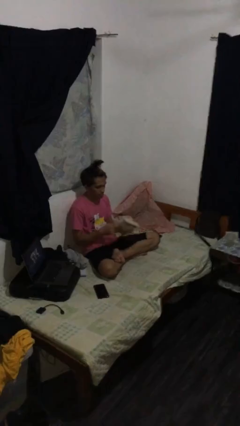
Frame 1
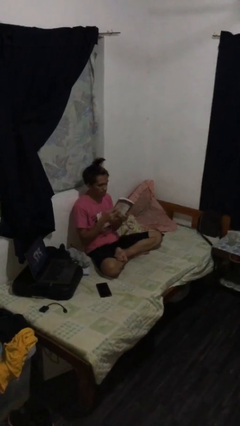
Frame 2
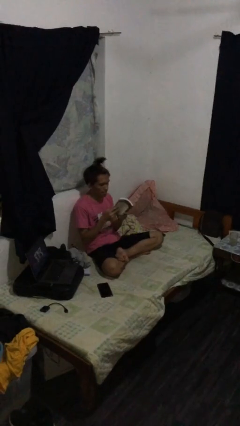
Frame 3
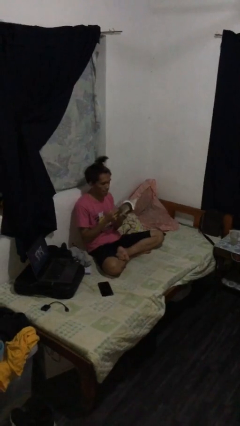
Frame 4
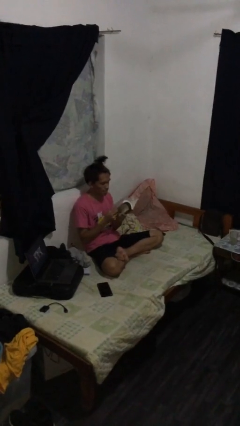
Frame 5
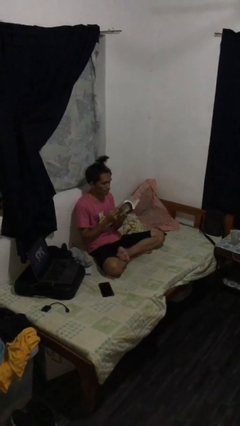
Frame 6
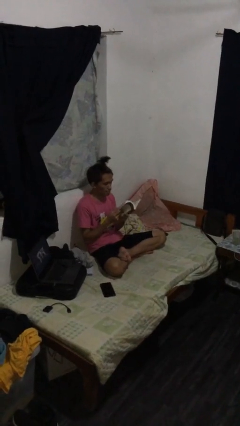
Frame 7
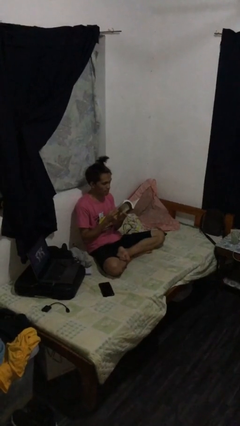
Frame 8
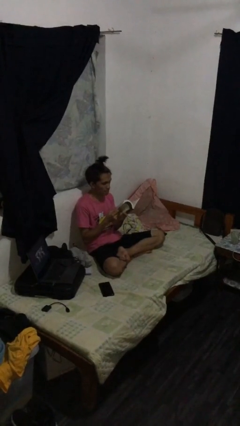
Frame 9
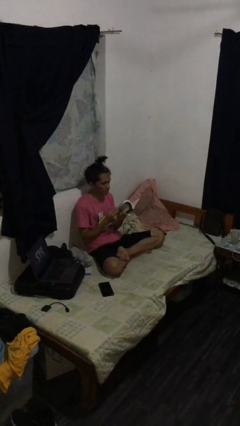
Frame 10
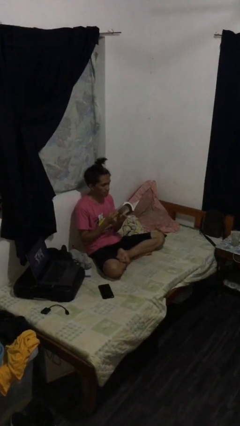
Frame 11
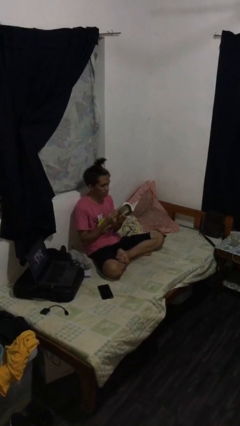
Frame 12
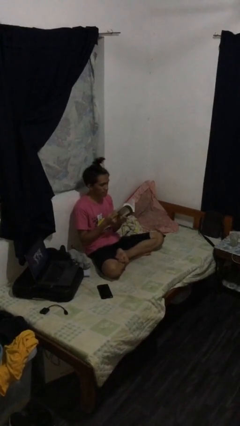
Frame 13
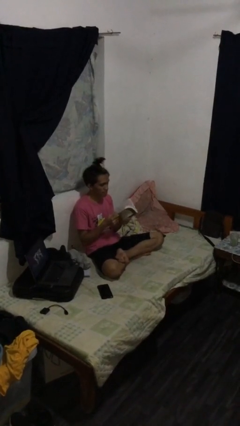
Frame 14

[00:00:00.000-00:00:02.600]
person reads document

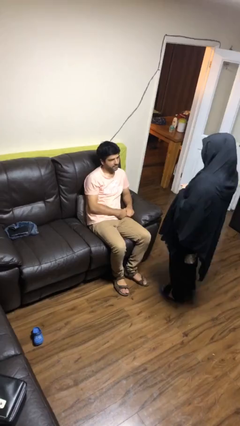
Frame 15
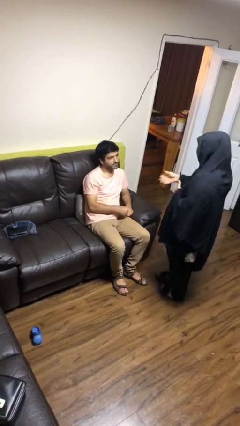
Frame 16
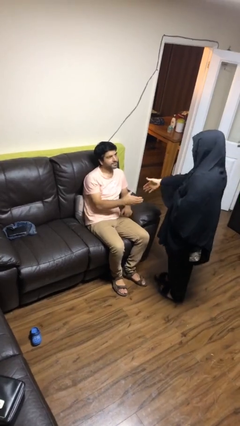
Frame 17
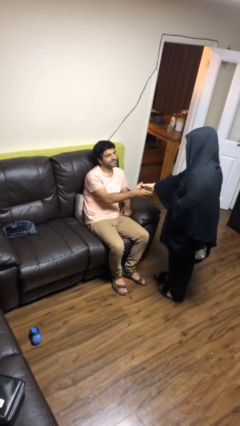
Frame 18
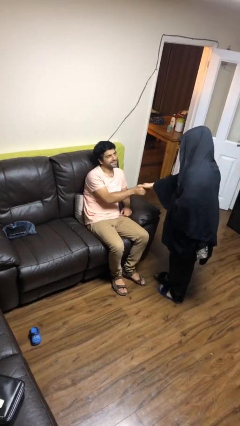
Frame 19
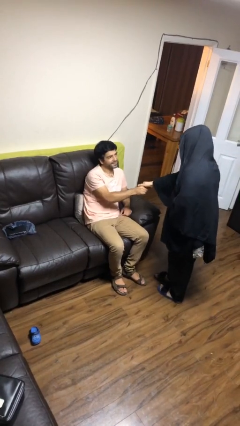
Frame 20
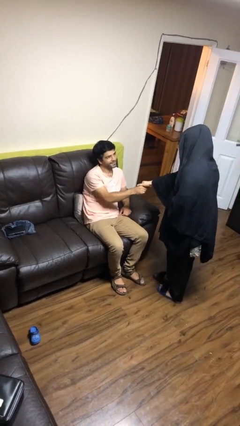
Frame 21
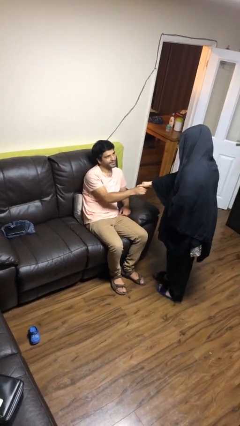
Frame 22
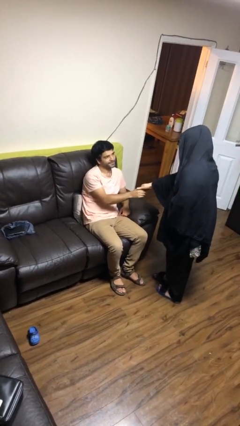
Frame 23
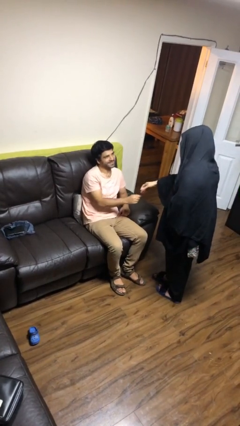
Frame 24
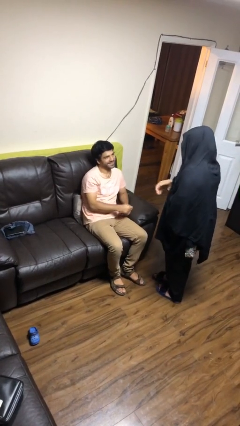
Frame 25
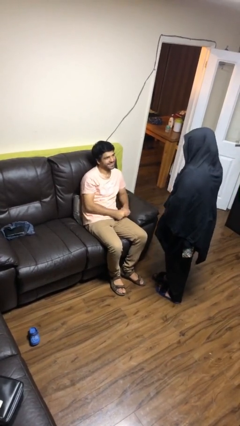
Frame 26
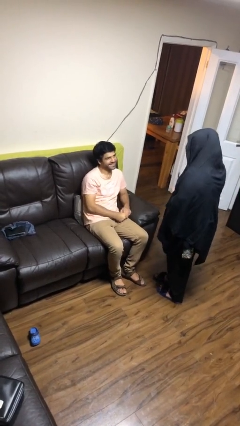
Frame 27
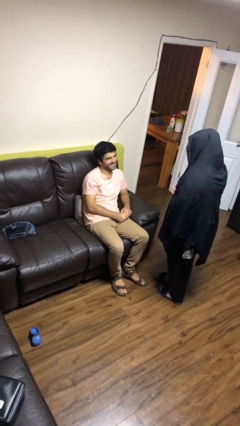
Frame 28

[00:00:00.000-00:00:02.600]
person shakes hand

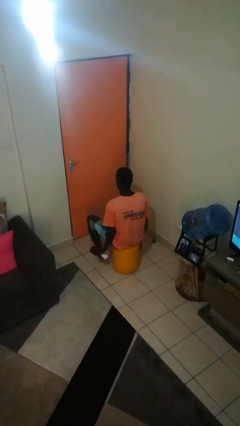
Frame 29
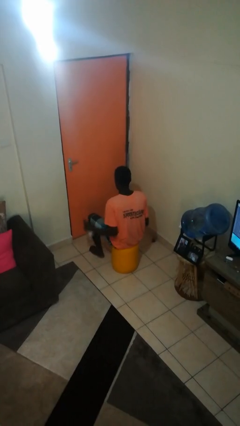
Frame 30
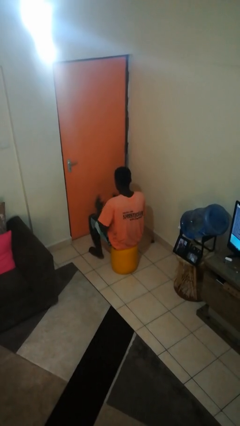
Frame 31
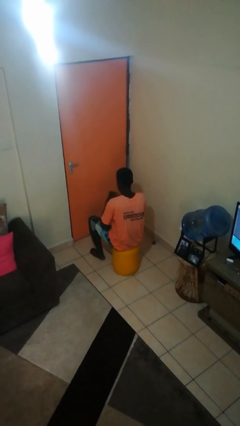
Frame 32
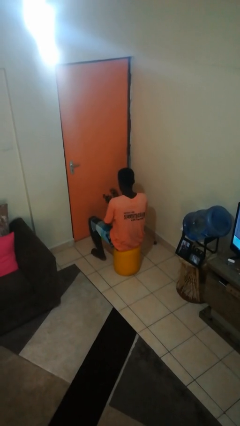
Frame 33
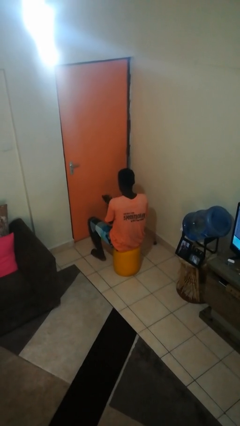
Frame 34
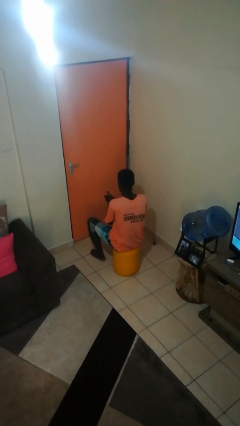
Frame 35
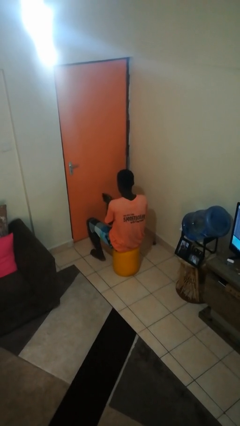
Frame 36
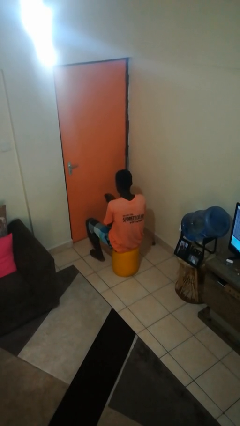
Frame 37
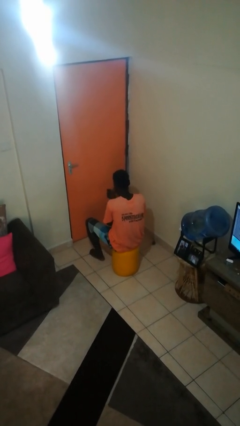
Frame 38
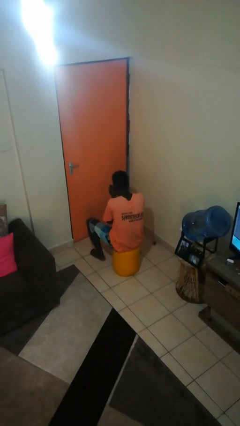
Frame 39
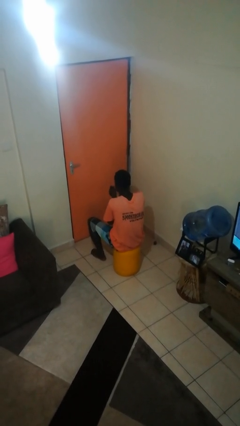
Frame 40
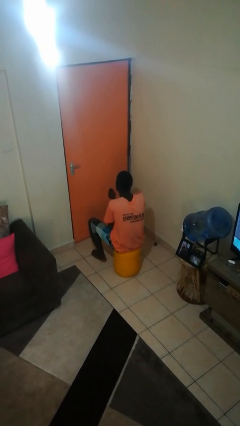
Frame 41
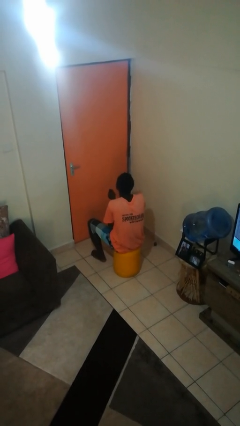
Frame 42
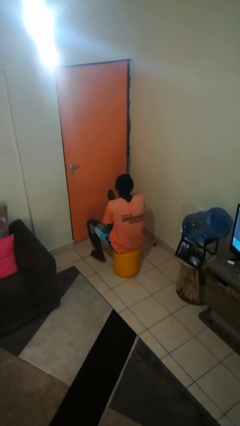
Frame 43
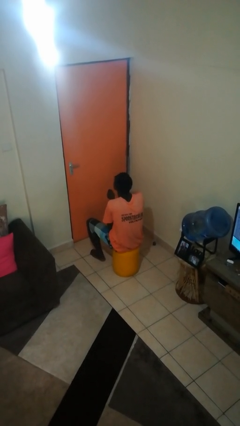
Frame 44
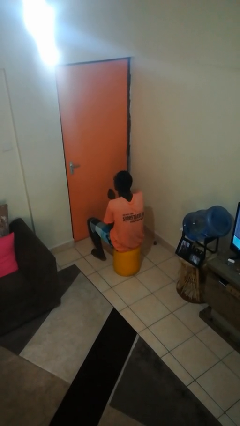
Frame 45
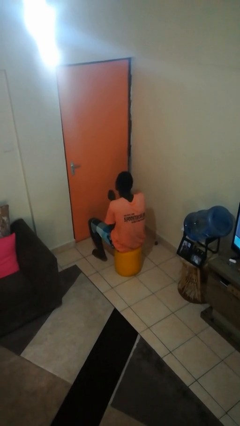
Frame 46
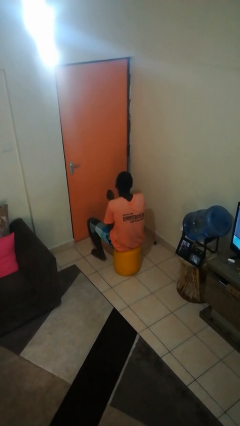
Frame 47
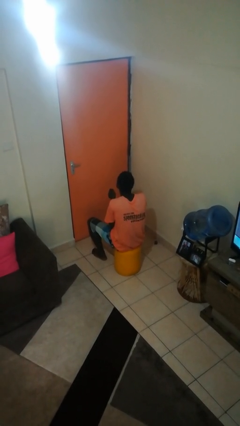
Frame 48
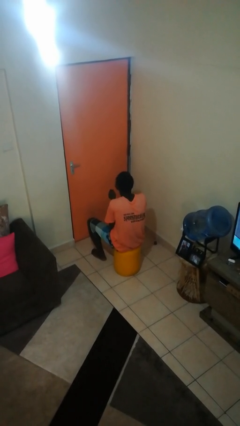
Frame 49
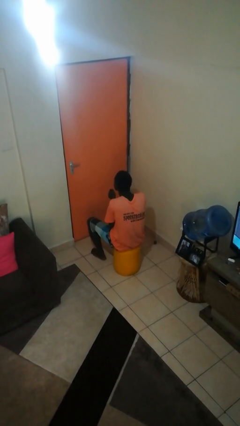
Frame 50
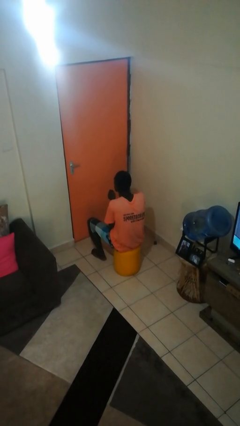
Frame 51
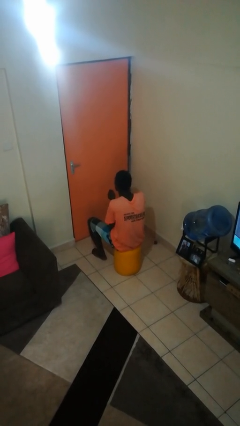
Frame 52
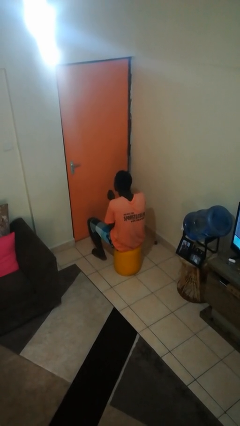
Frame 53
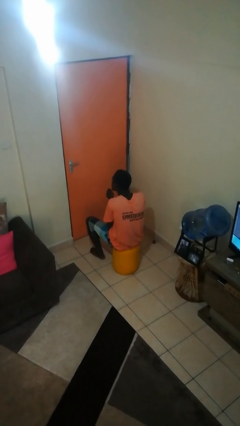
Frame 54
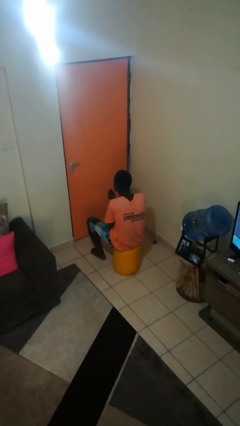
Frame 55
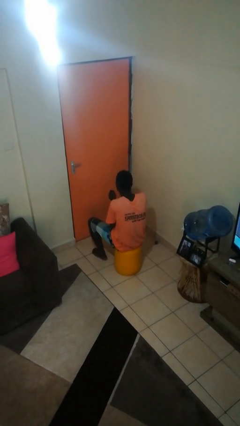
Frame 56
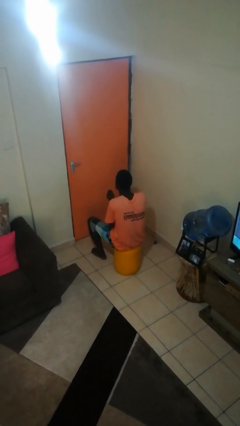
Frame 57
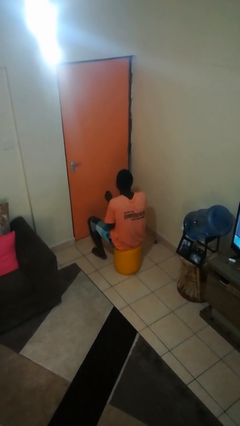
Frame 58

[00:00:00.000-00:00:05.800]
person applies sunscreen

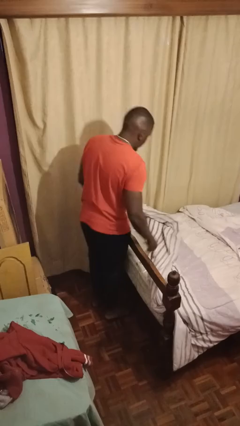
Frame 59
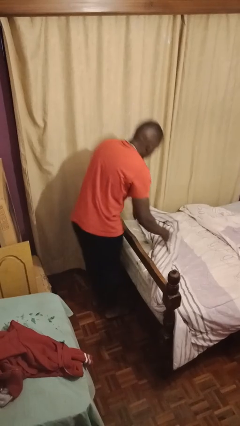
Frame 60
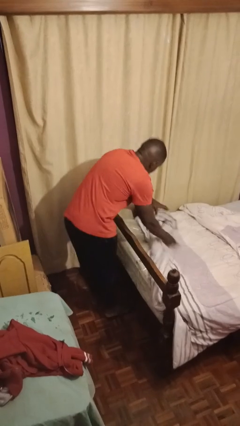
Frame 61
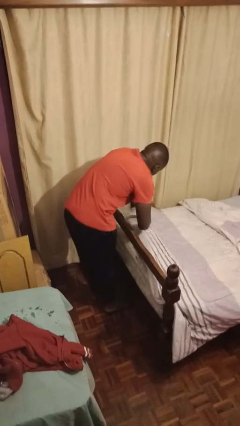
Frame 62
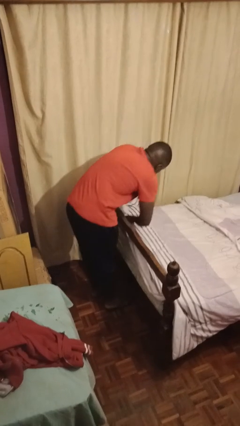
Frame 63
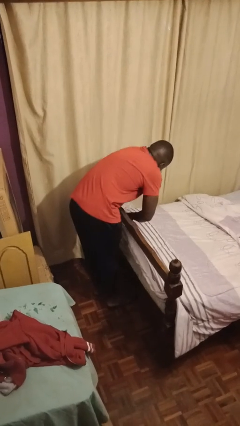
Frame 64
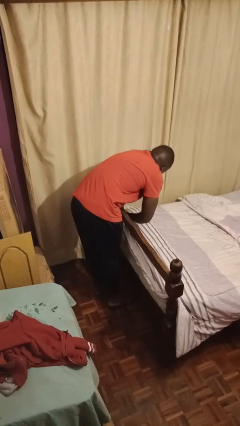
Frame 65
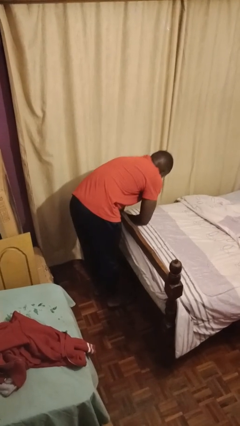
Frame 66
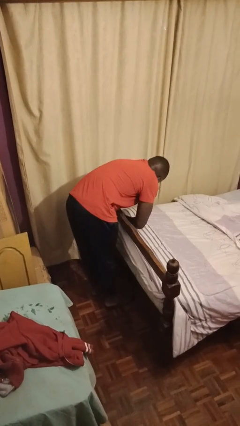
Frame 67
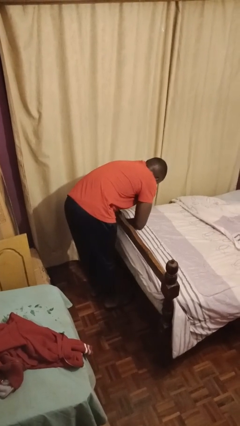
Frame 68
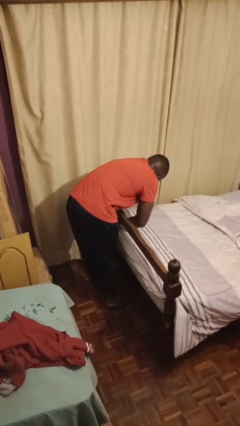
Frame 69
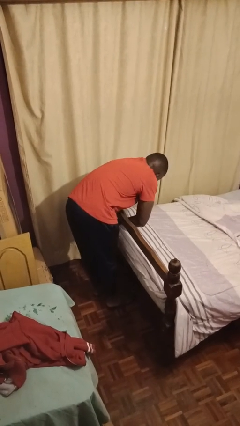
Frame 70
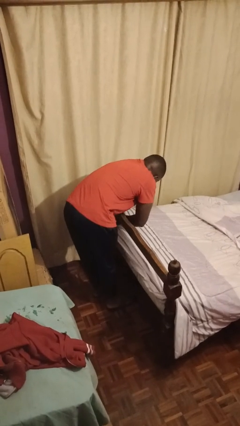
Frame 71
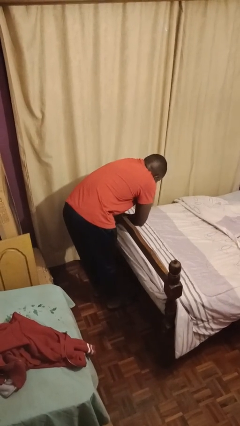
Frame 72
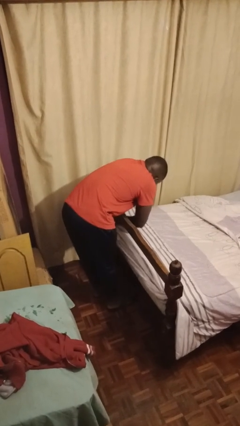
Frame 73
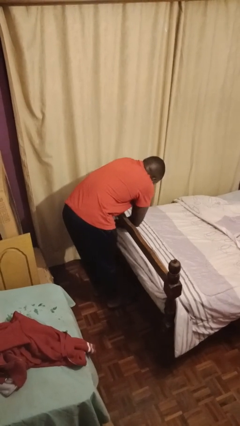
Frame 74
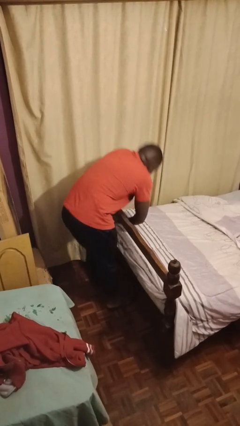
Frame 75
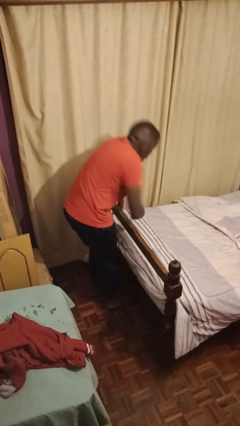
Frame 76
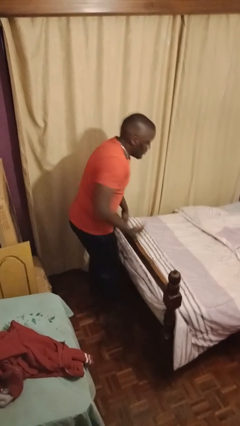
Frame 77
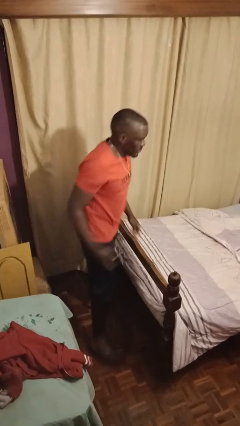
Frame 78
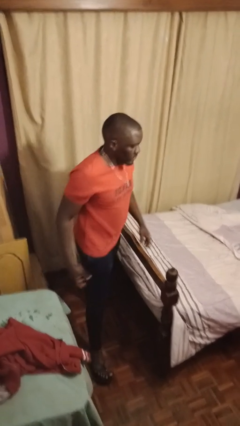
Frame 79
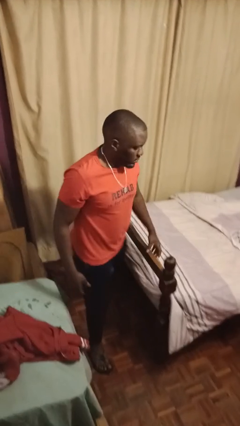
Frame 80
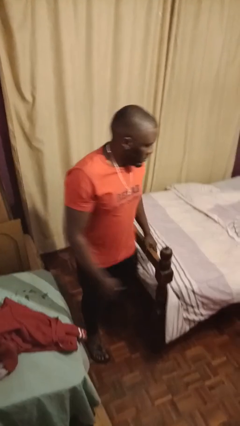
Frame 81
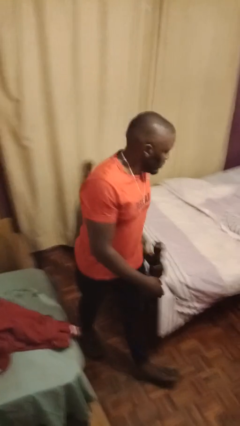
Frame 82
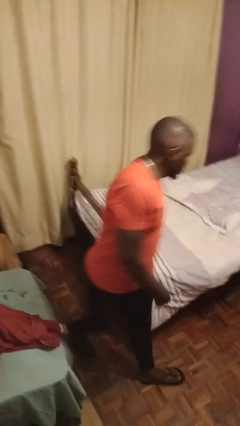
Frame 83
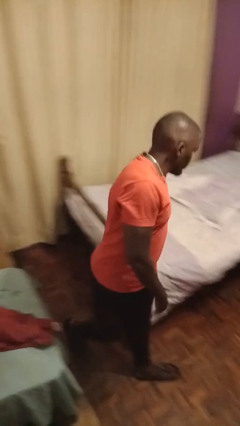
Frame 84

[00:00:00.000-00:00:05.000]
person makes bed

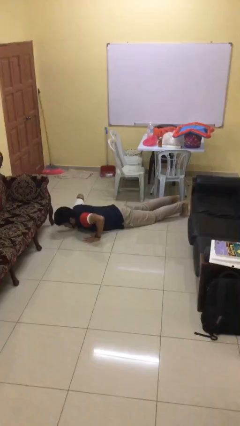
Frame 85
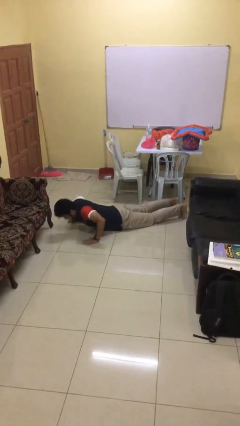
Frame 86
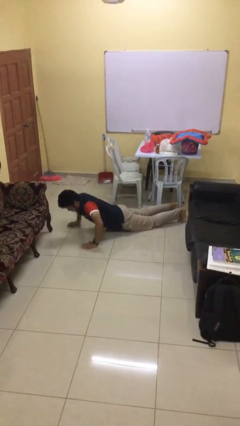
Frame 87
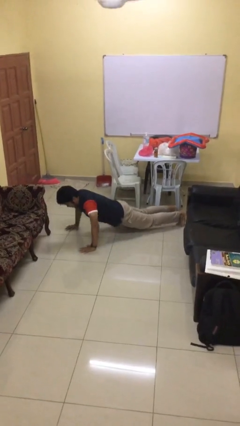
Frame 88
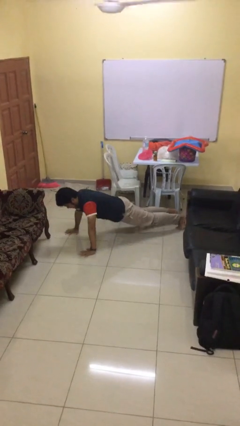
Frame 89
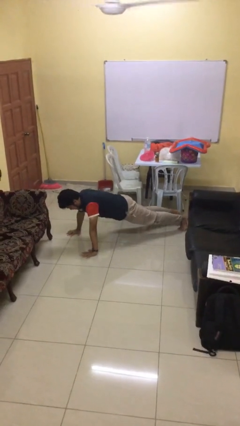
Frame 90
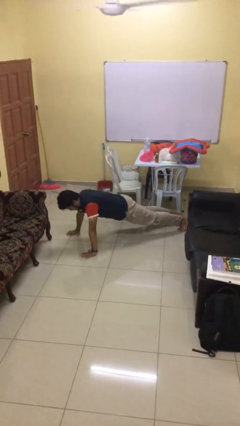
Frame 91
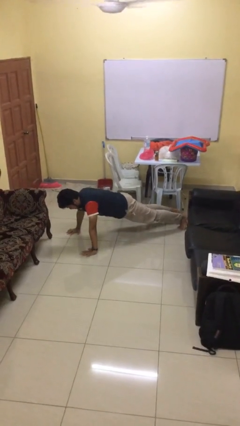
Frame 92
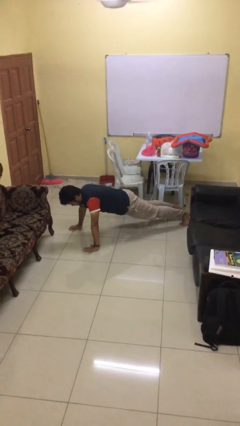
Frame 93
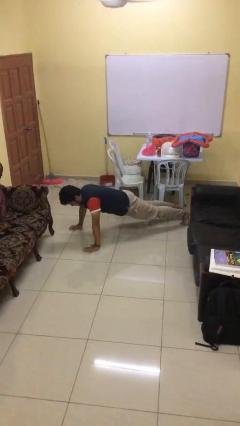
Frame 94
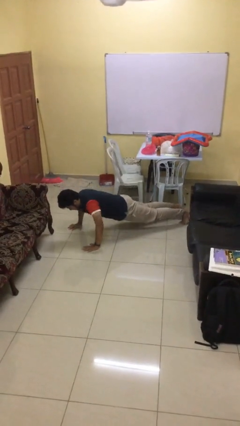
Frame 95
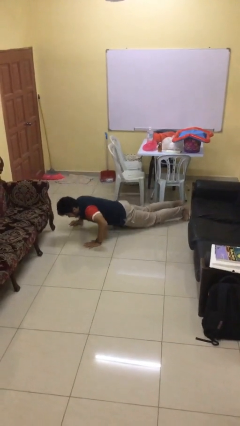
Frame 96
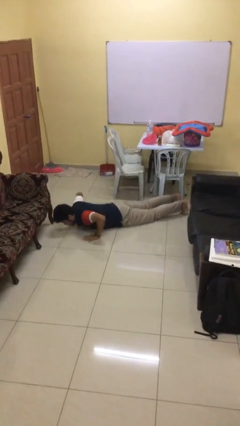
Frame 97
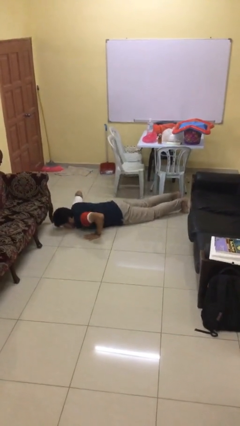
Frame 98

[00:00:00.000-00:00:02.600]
person exercises with pushup
